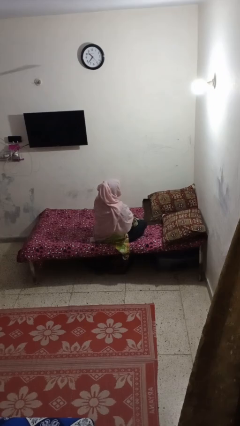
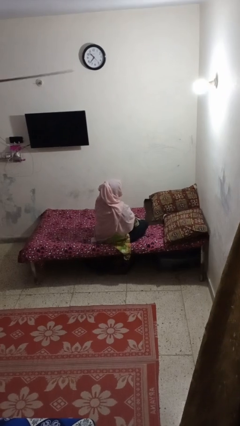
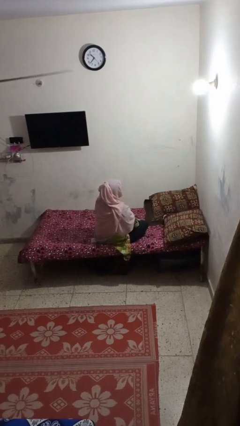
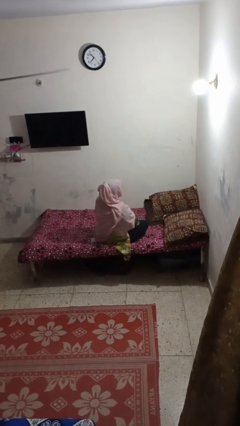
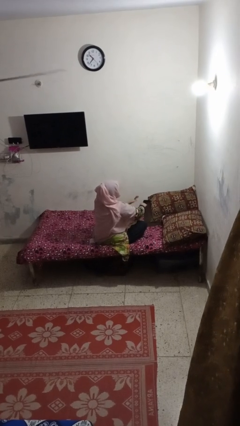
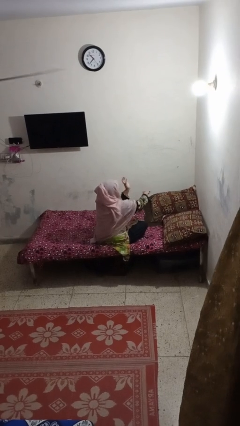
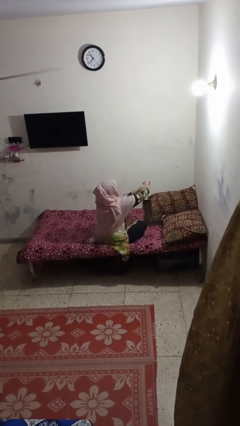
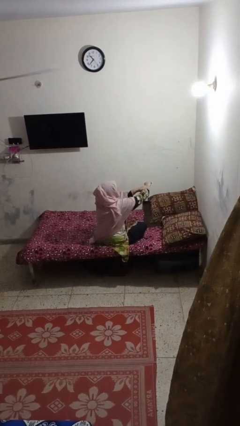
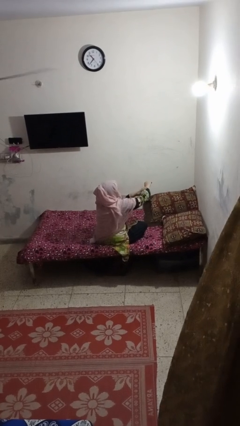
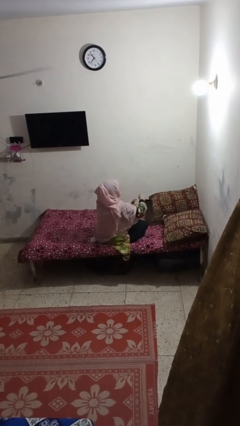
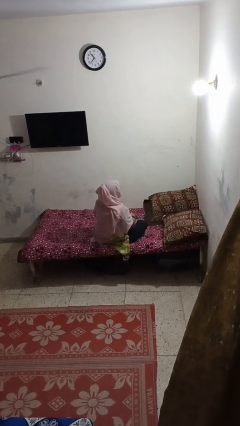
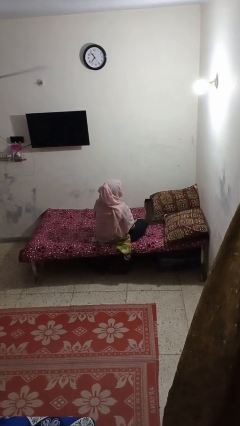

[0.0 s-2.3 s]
person swats bug

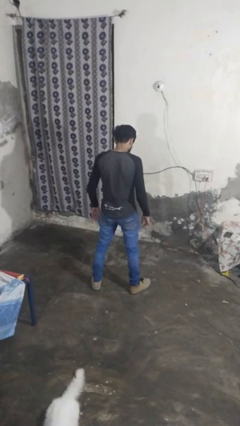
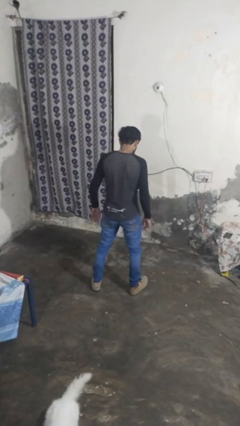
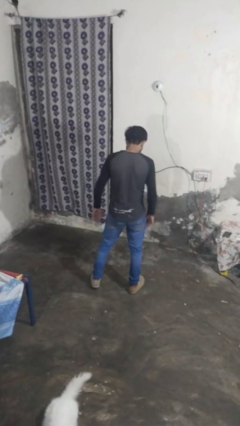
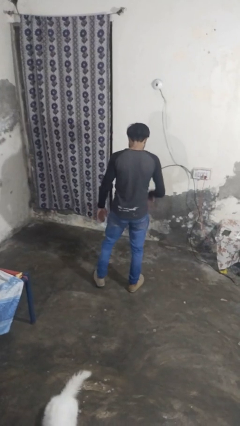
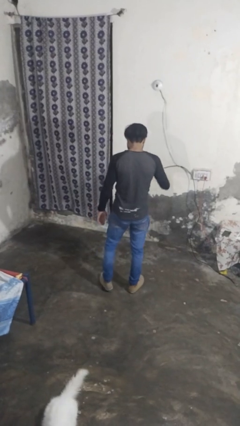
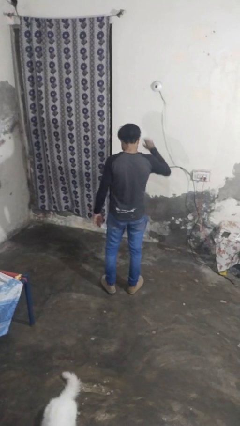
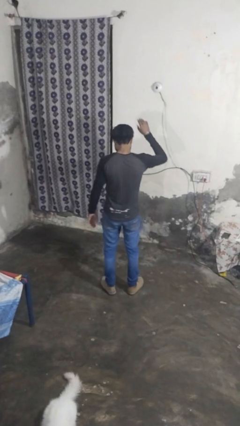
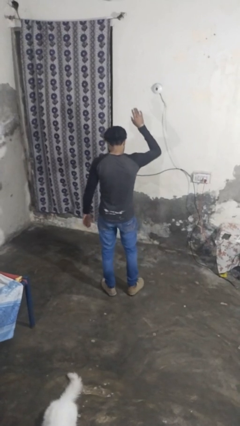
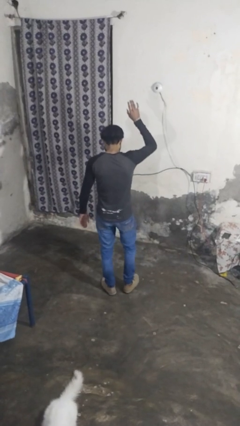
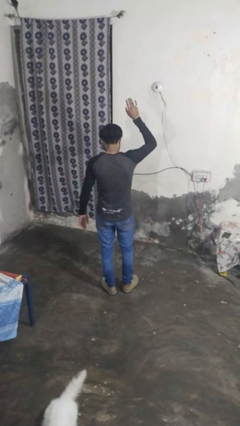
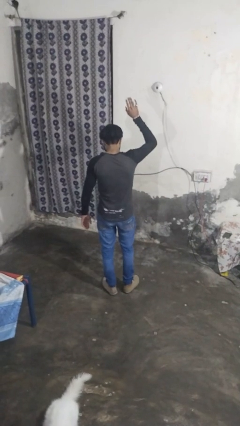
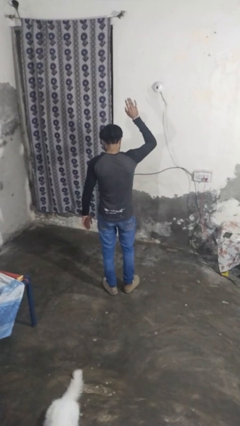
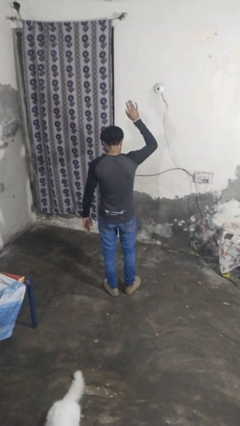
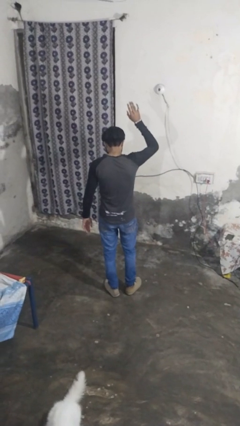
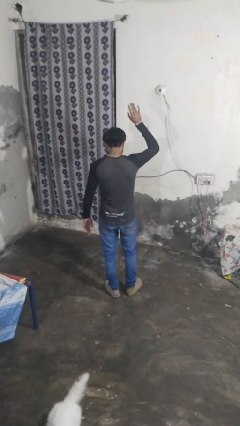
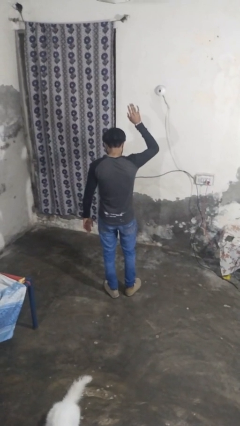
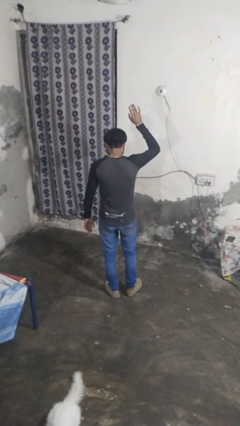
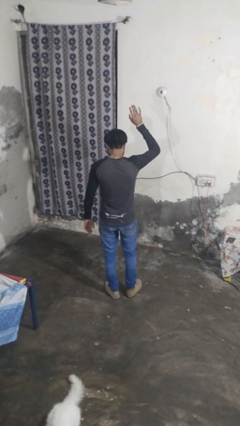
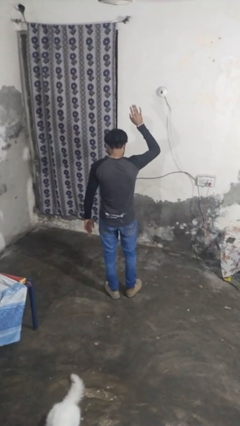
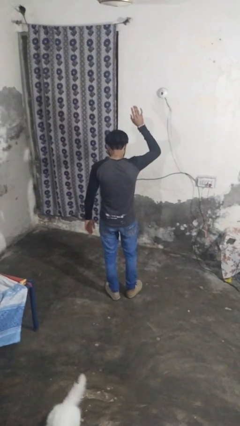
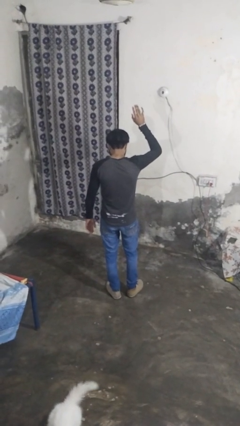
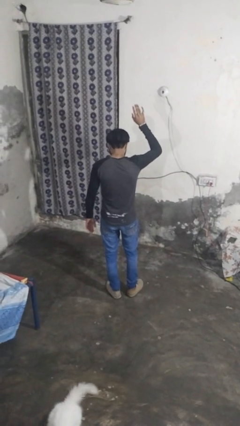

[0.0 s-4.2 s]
person gestures raise hand

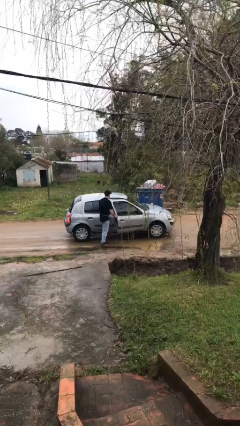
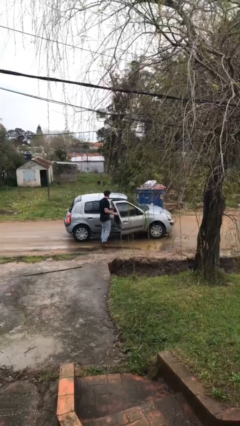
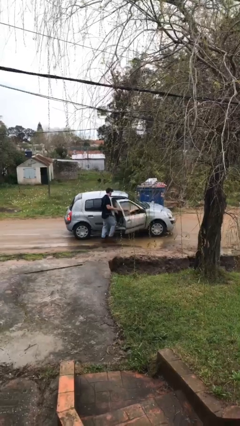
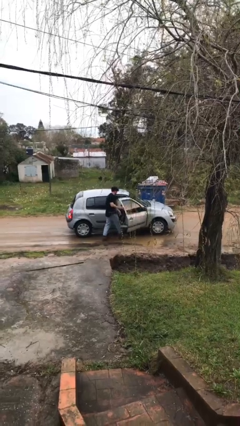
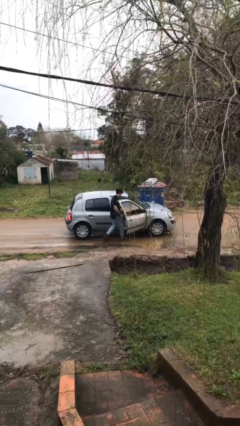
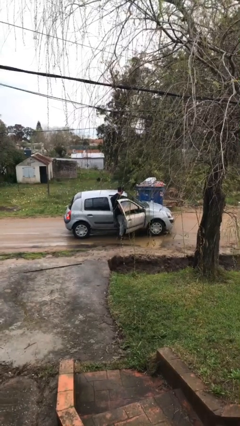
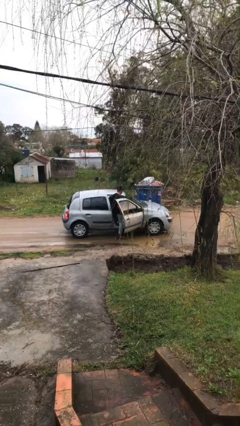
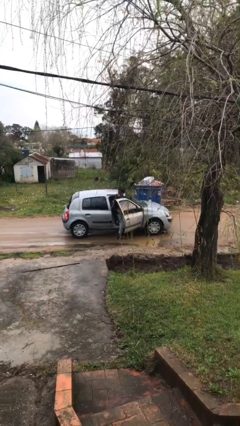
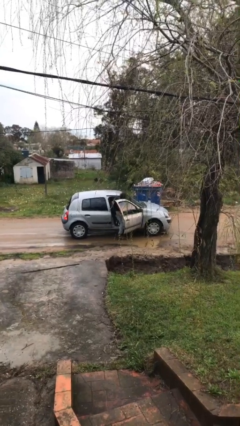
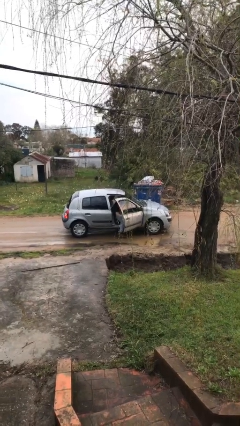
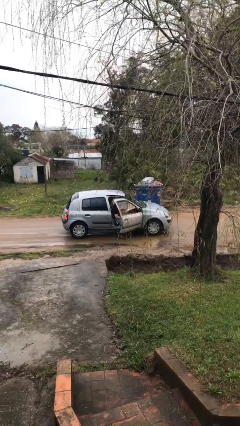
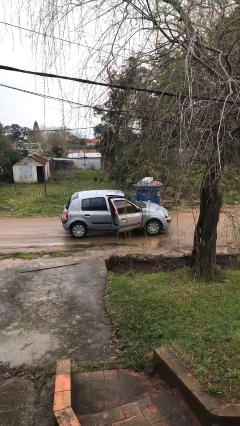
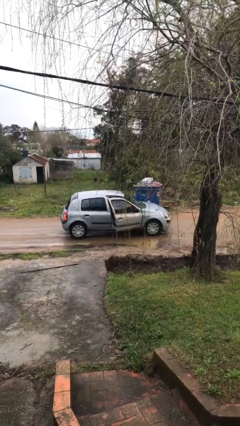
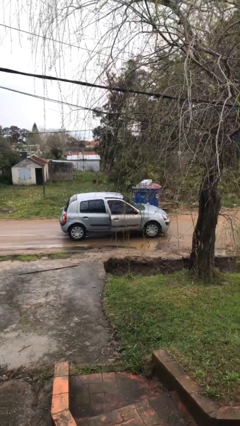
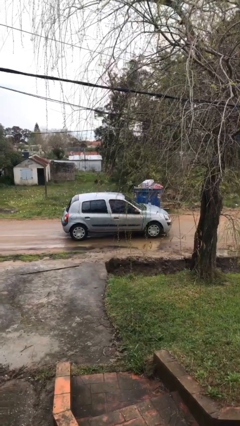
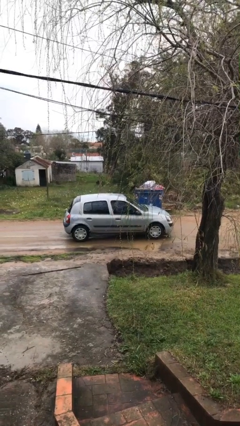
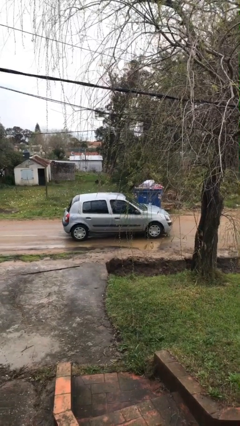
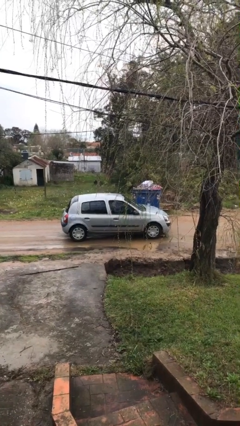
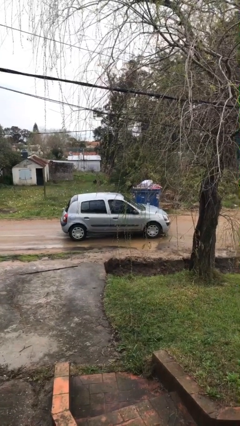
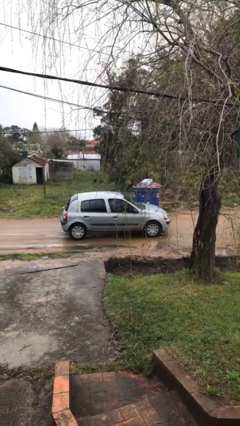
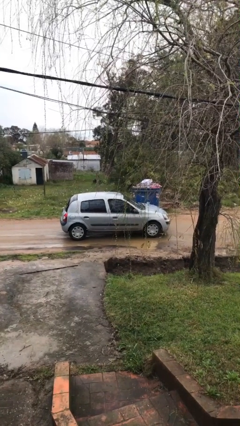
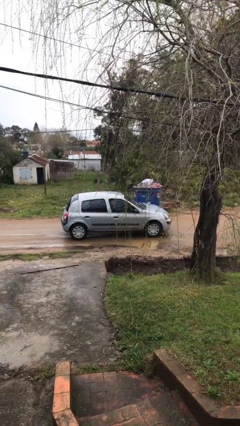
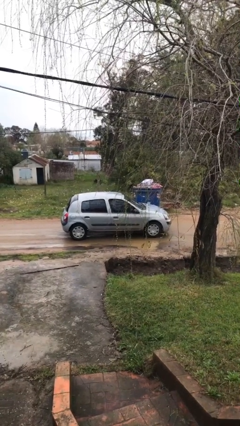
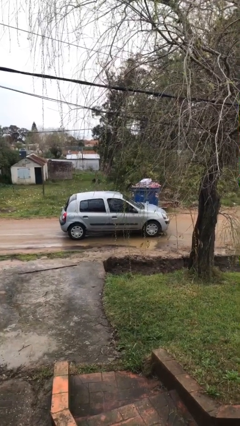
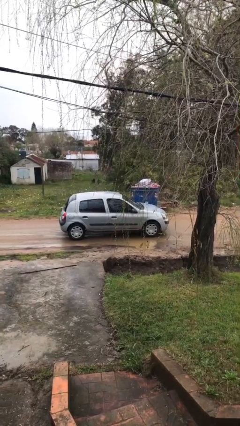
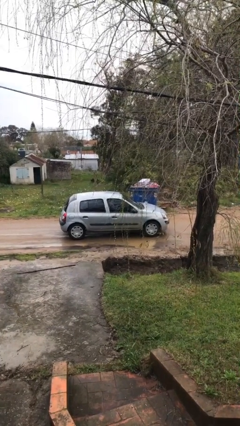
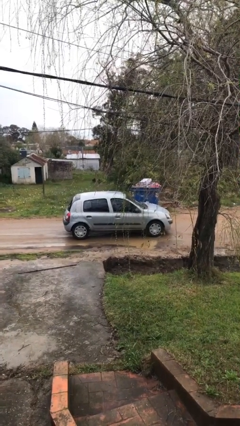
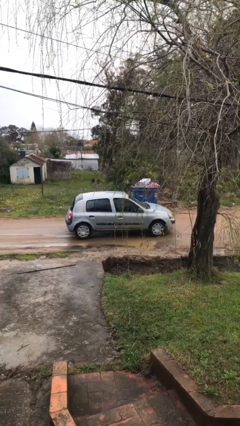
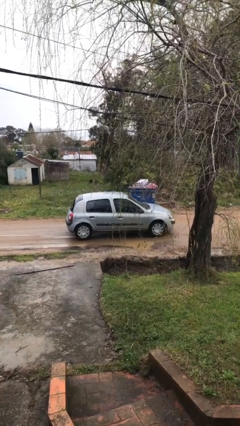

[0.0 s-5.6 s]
car picks up person

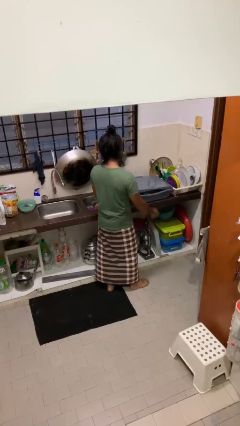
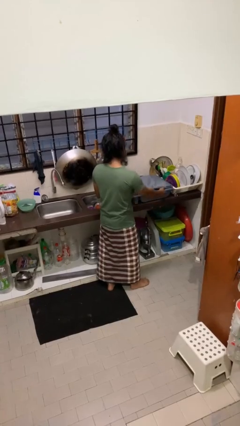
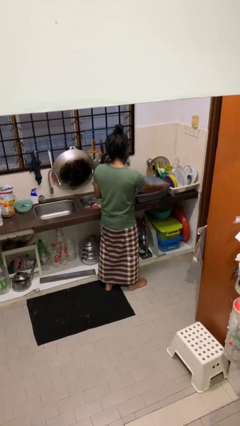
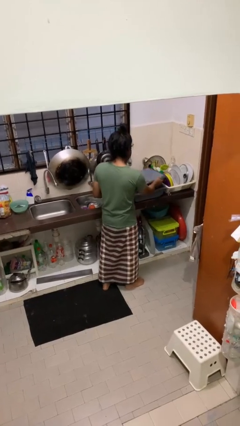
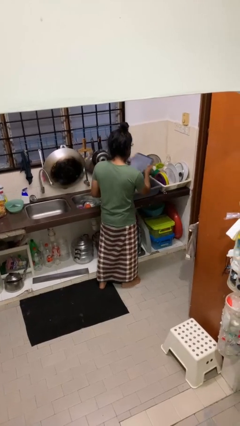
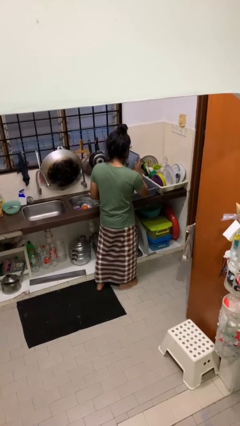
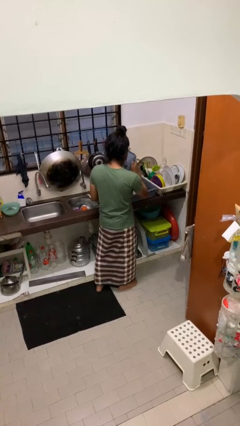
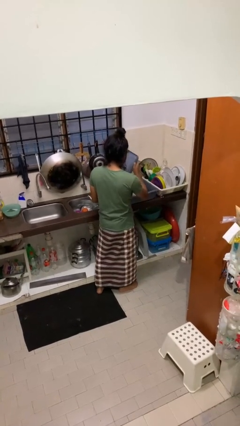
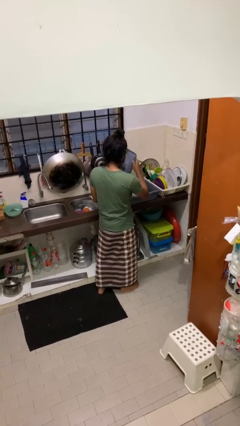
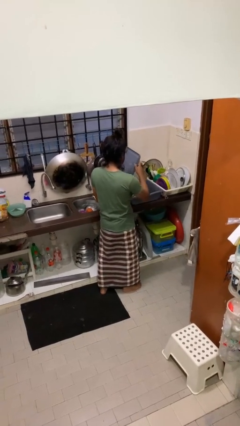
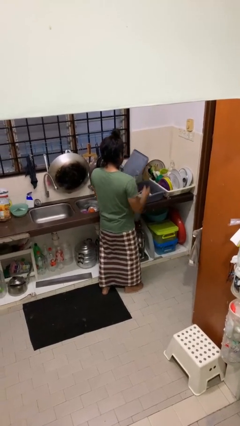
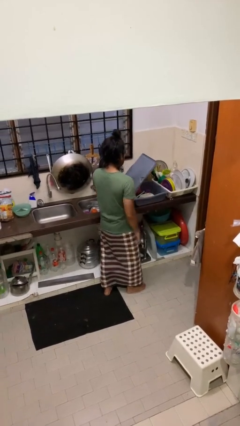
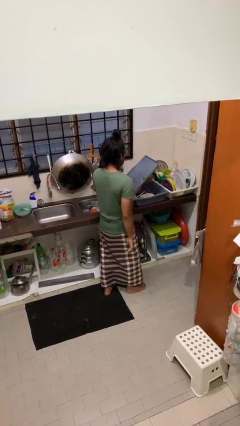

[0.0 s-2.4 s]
person opens dishwasher

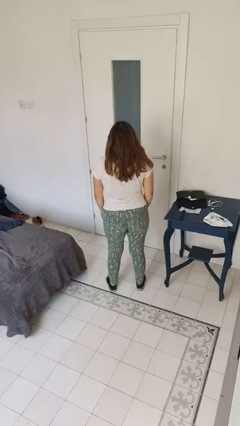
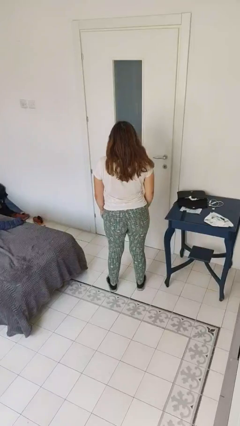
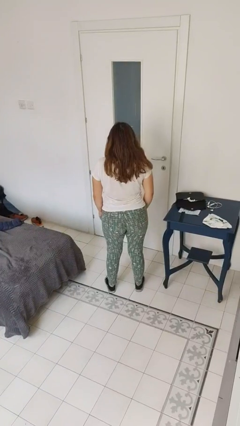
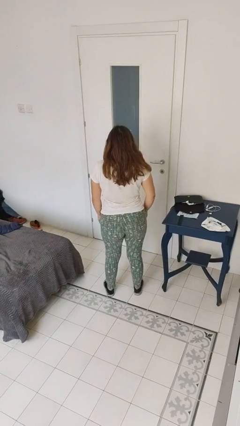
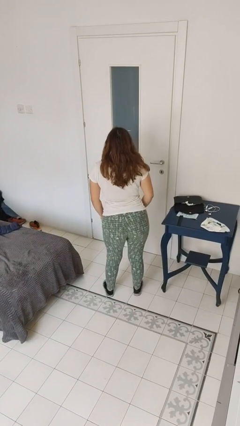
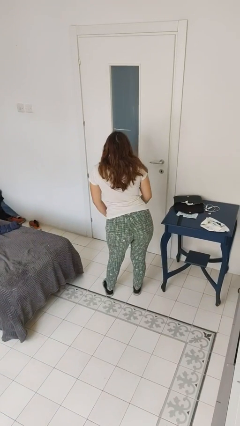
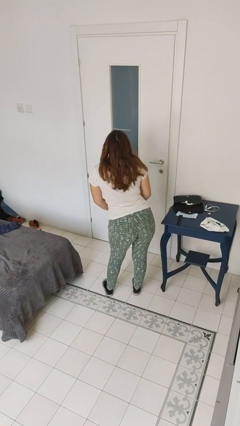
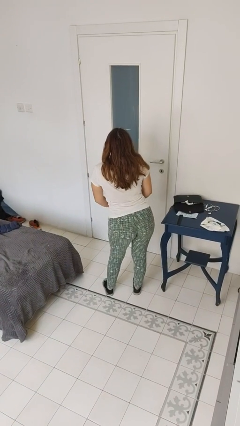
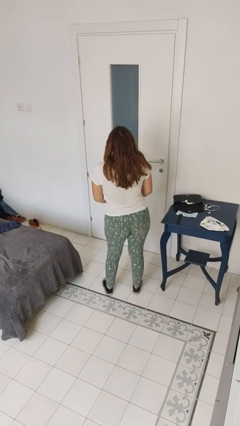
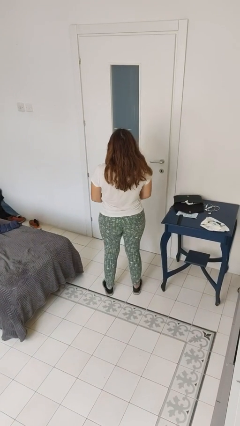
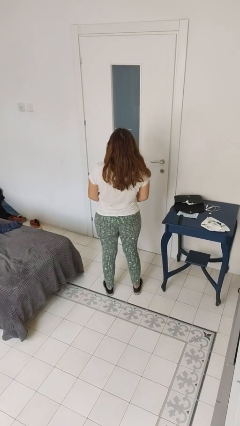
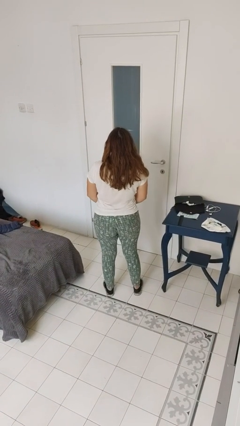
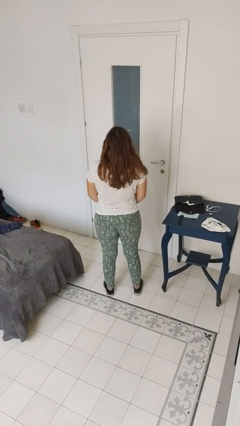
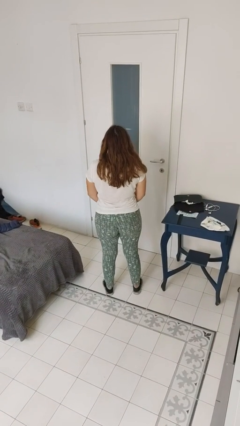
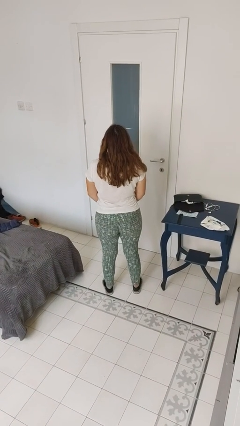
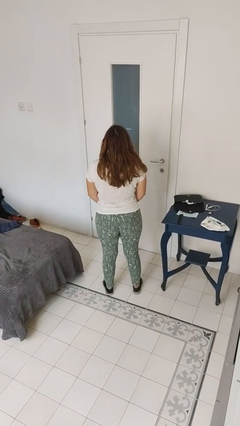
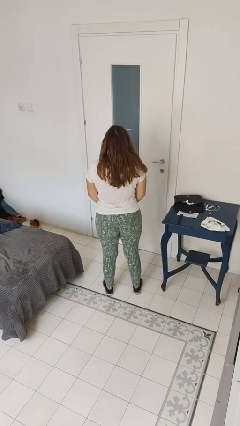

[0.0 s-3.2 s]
person wiggles hips
